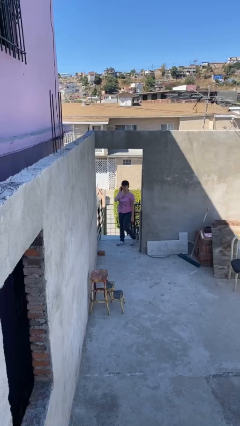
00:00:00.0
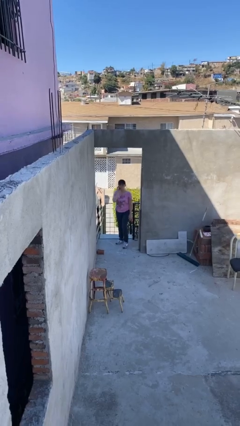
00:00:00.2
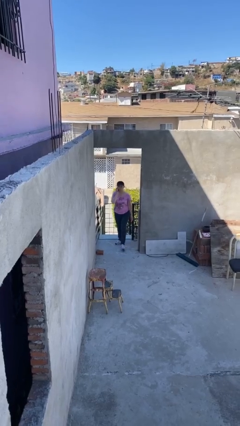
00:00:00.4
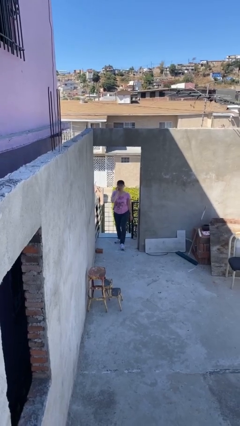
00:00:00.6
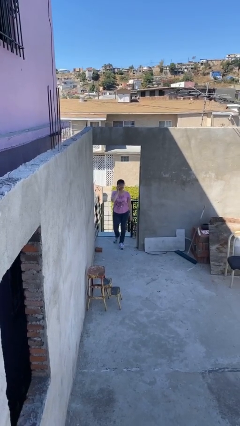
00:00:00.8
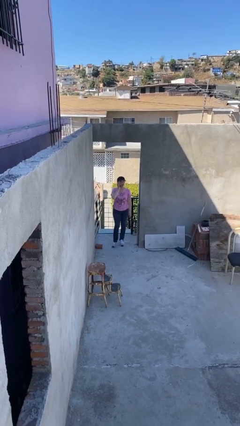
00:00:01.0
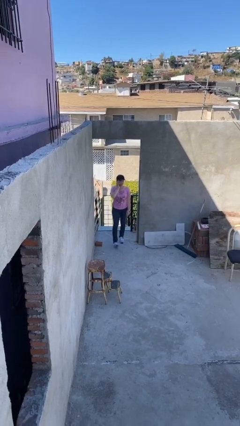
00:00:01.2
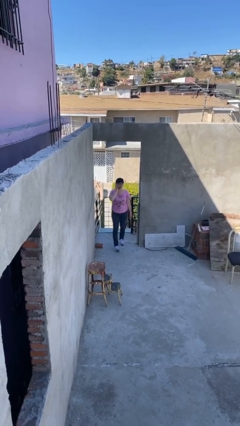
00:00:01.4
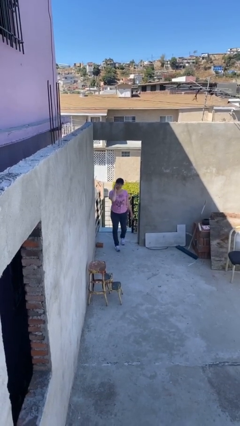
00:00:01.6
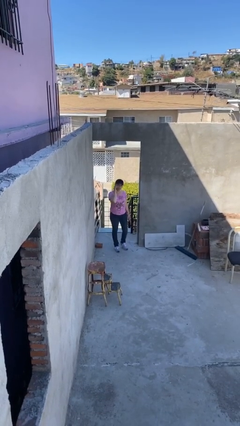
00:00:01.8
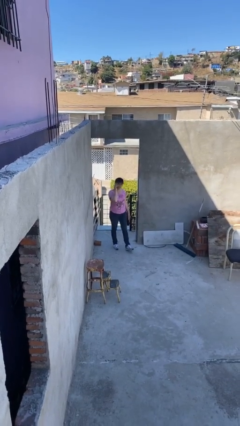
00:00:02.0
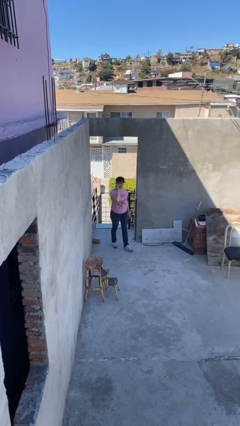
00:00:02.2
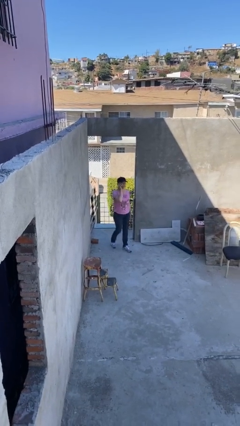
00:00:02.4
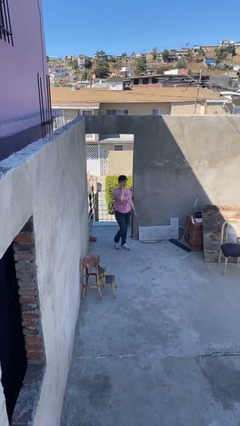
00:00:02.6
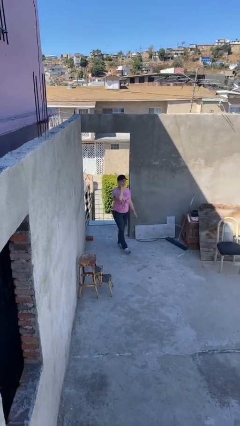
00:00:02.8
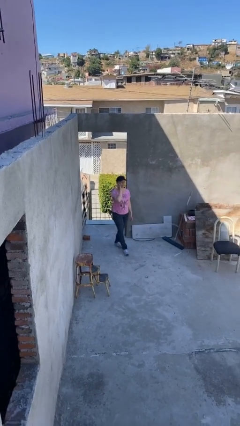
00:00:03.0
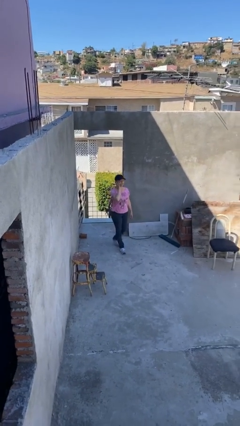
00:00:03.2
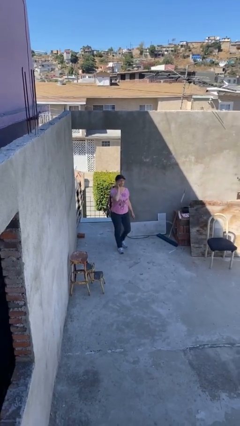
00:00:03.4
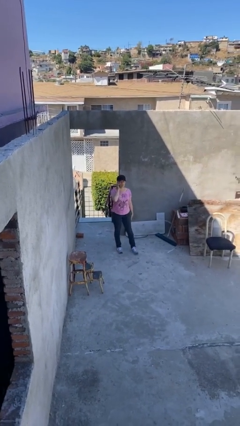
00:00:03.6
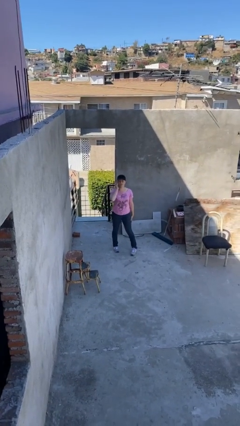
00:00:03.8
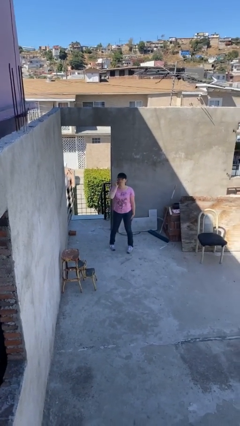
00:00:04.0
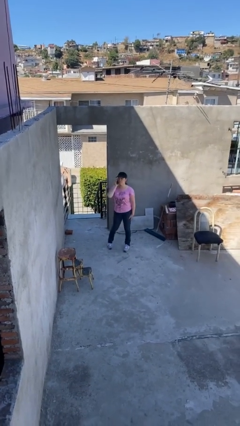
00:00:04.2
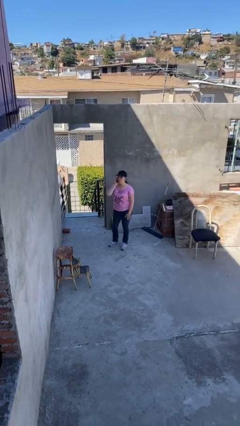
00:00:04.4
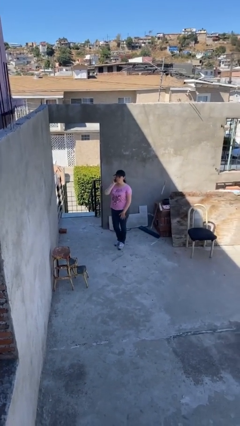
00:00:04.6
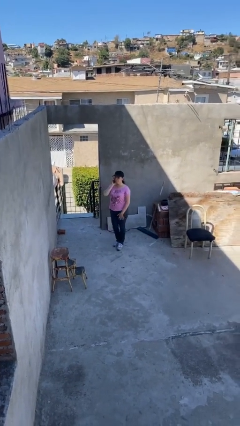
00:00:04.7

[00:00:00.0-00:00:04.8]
person enters scene through structure

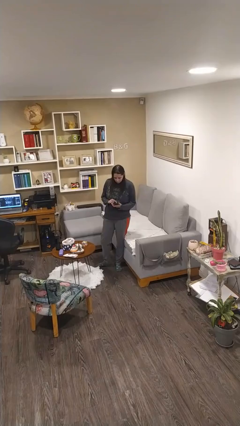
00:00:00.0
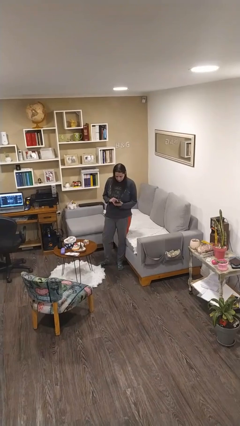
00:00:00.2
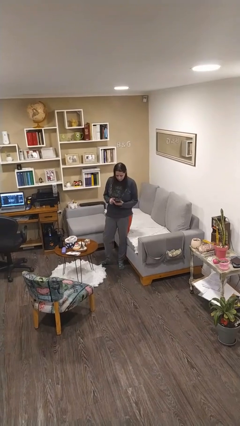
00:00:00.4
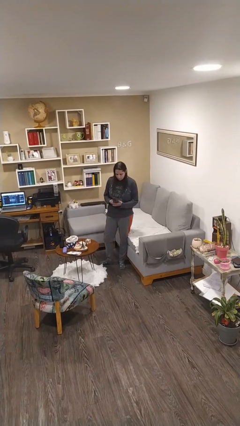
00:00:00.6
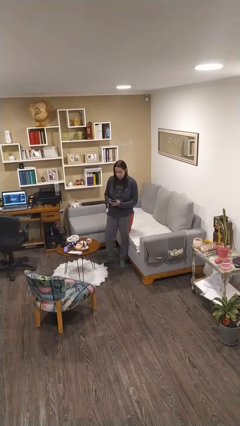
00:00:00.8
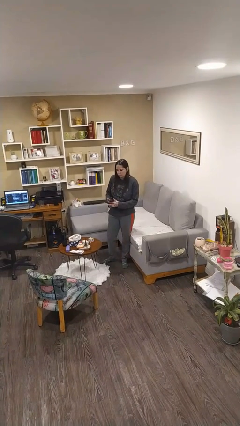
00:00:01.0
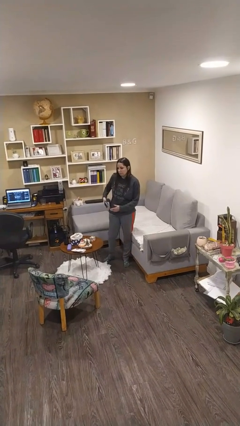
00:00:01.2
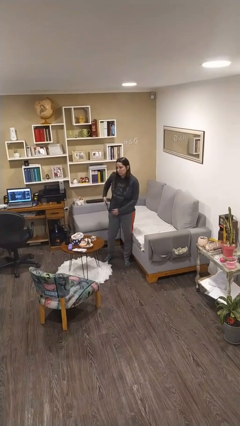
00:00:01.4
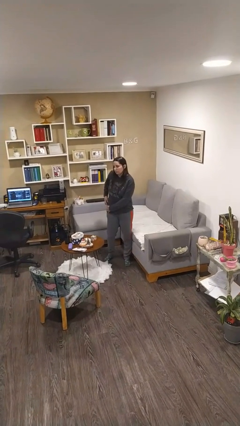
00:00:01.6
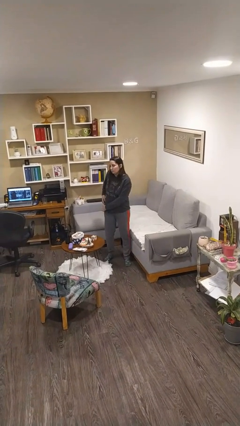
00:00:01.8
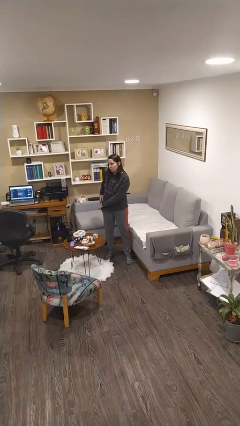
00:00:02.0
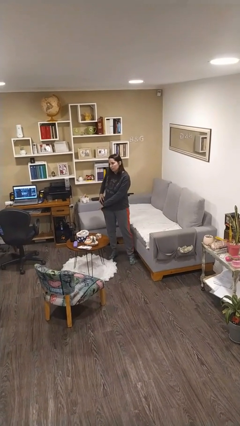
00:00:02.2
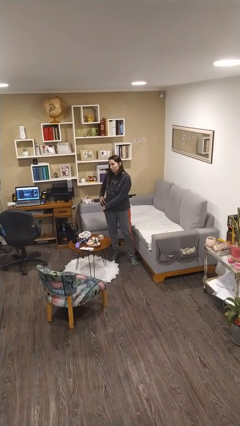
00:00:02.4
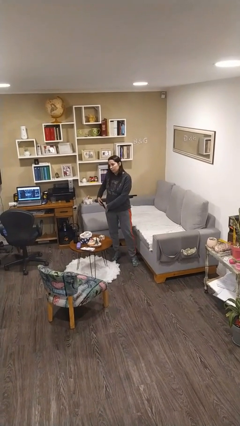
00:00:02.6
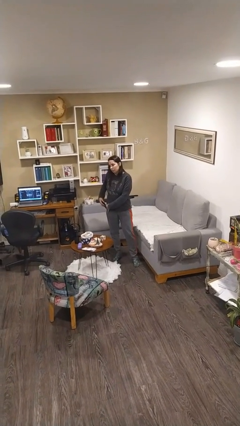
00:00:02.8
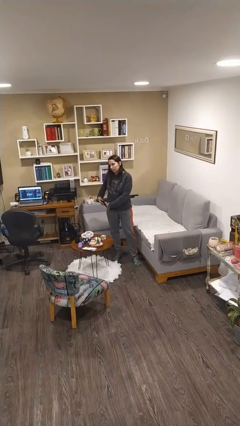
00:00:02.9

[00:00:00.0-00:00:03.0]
person puts phone into pocket

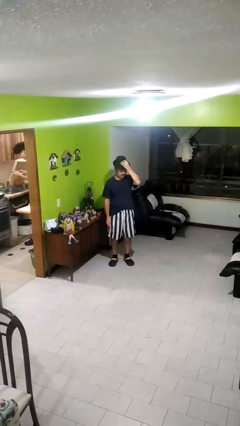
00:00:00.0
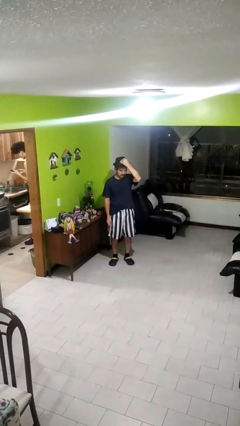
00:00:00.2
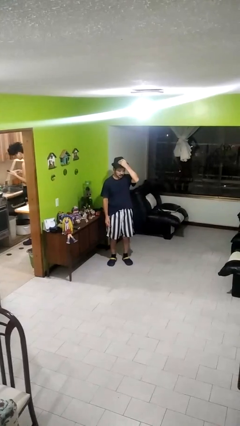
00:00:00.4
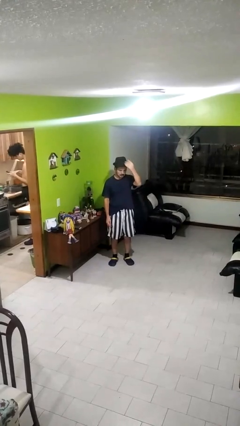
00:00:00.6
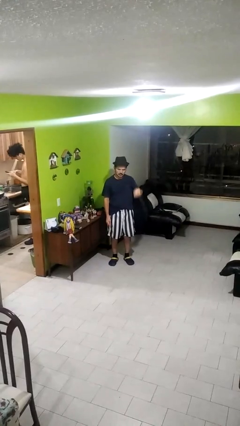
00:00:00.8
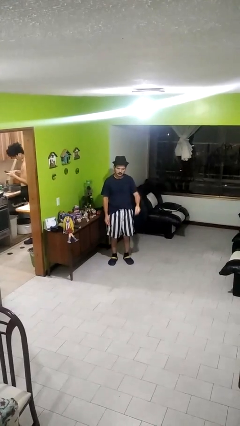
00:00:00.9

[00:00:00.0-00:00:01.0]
person puts on hat

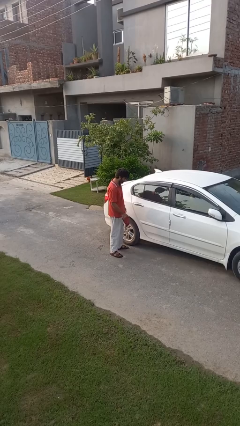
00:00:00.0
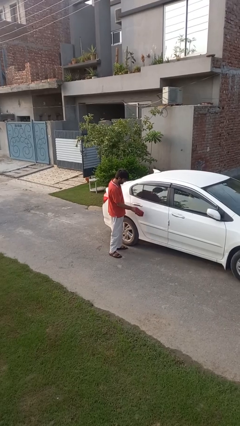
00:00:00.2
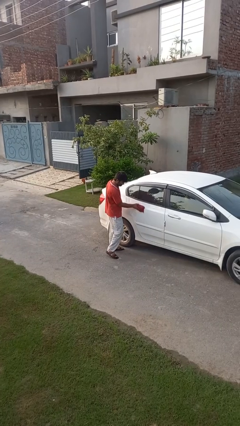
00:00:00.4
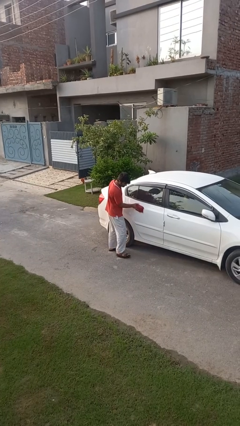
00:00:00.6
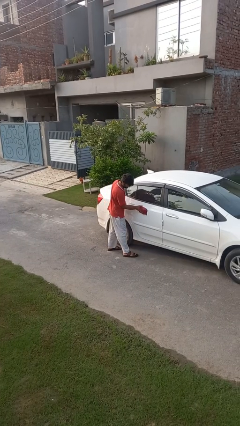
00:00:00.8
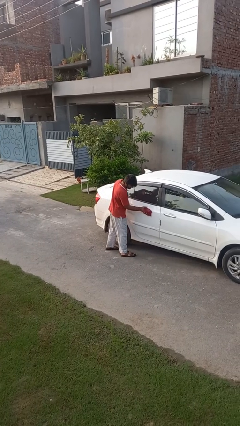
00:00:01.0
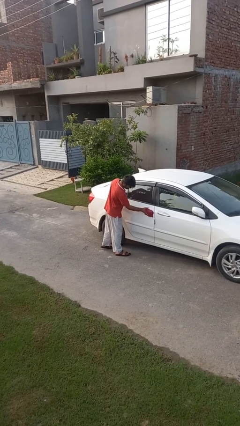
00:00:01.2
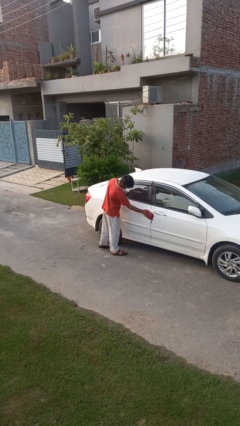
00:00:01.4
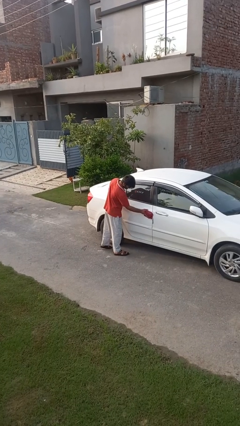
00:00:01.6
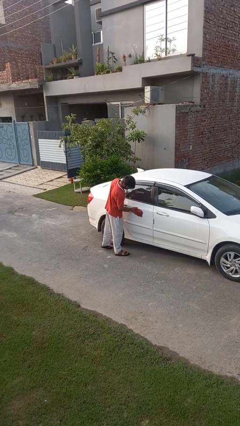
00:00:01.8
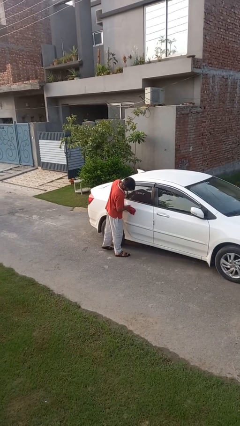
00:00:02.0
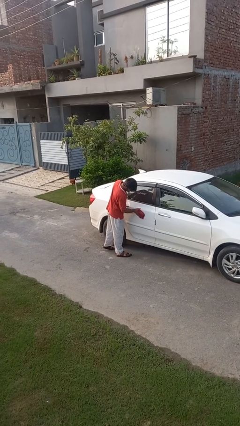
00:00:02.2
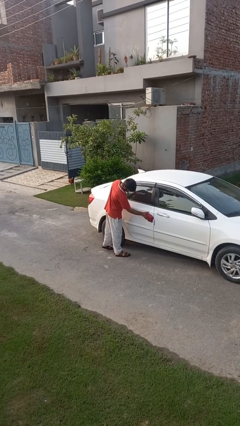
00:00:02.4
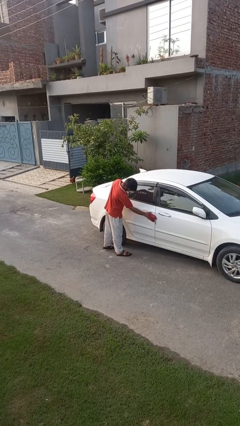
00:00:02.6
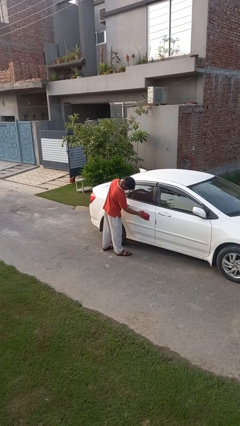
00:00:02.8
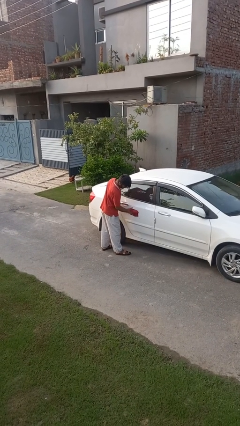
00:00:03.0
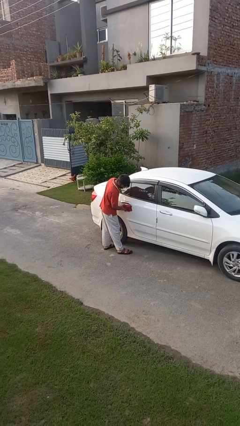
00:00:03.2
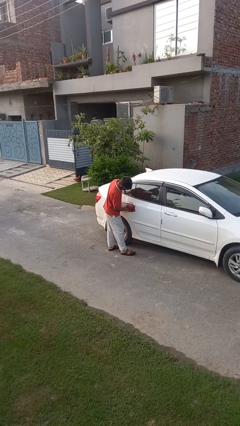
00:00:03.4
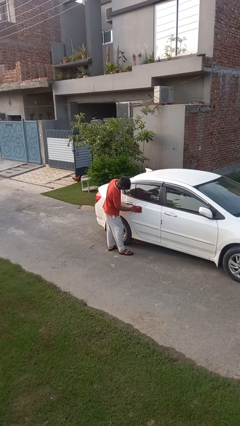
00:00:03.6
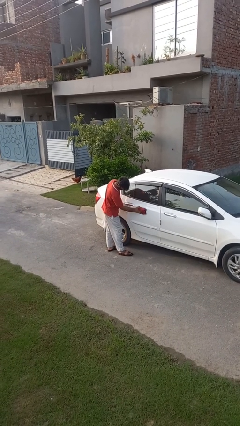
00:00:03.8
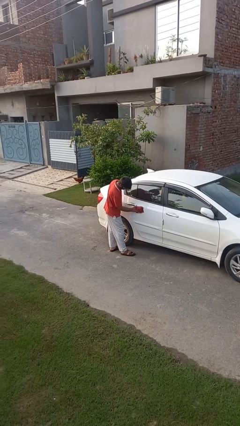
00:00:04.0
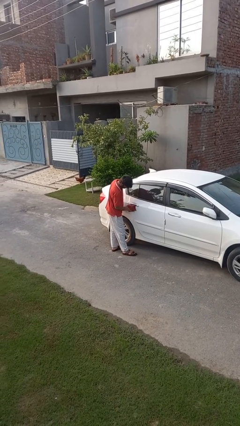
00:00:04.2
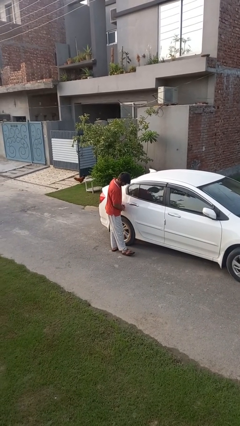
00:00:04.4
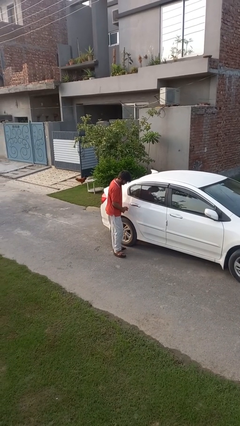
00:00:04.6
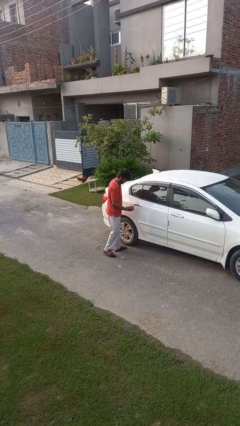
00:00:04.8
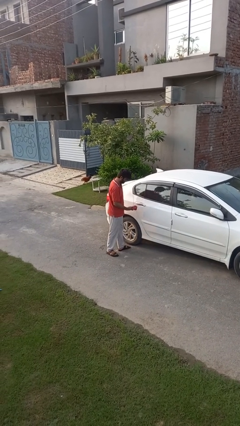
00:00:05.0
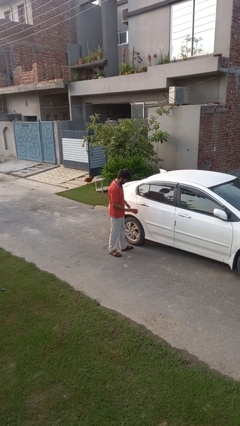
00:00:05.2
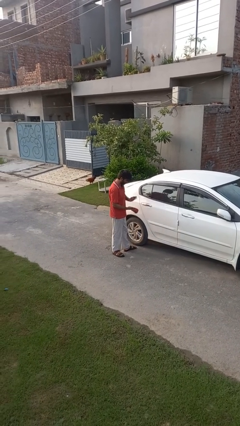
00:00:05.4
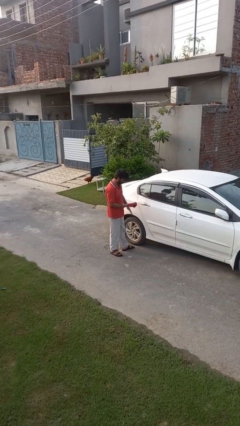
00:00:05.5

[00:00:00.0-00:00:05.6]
person polishes car with rag

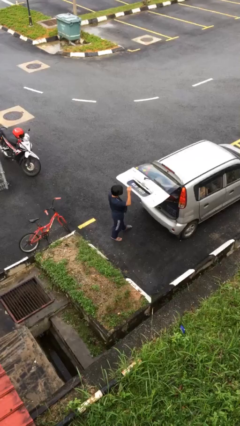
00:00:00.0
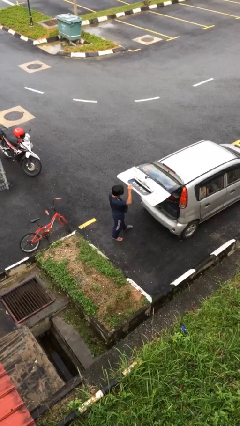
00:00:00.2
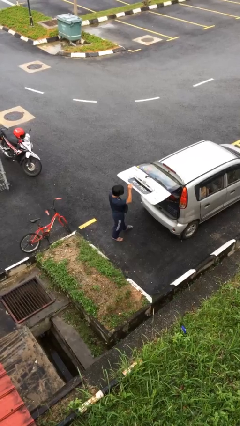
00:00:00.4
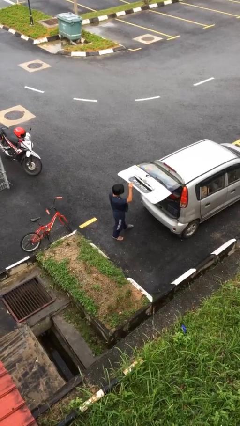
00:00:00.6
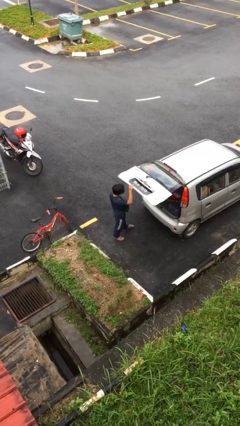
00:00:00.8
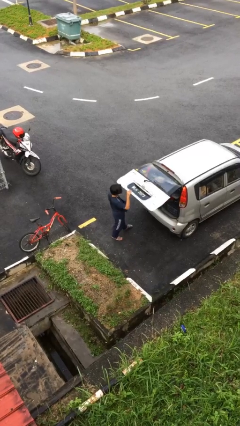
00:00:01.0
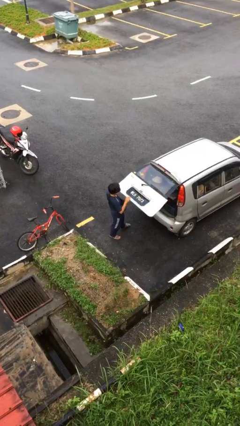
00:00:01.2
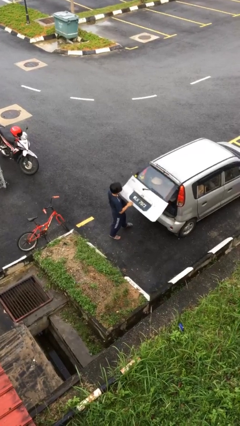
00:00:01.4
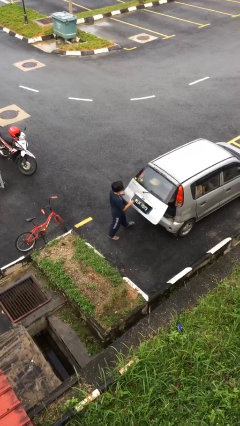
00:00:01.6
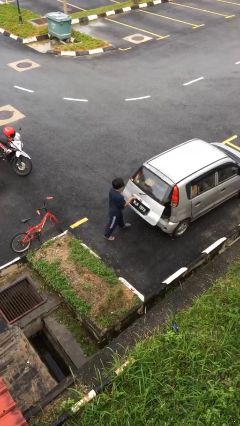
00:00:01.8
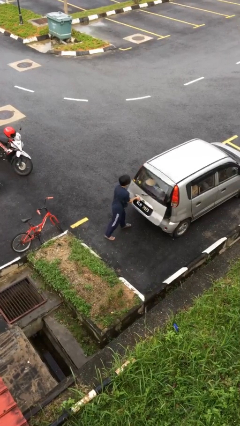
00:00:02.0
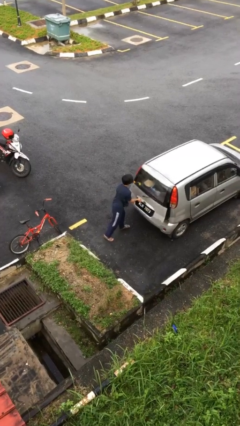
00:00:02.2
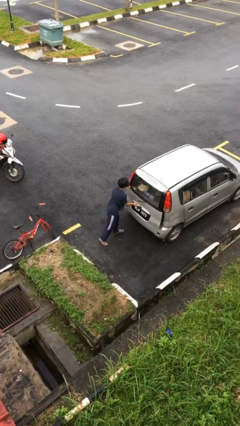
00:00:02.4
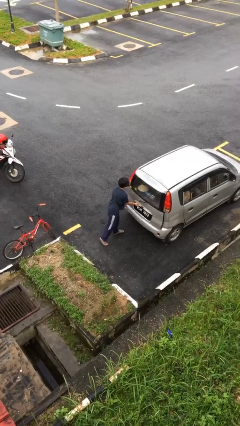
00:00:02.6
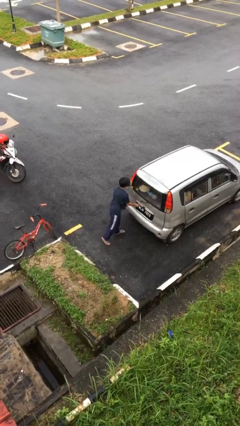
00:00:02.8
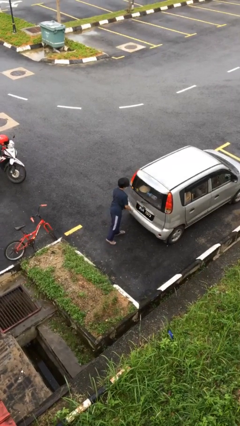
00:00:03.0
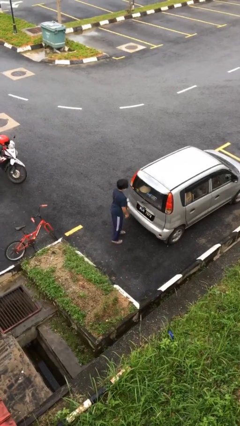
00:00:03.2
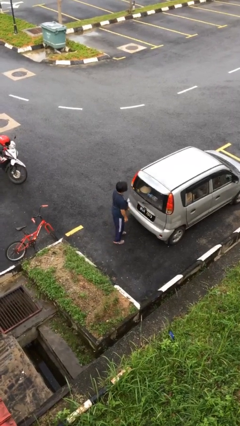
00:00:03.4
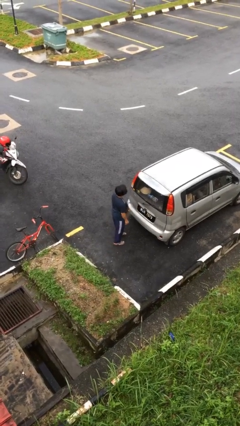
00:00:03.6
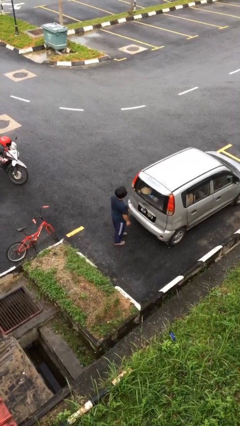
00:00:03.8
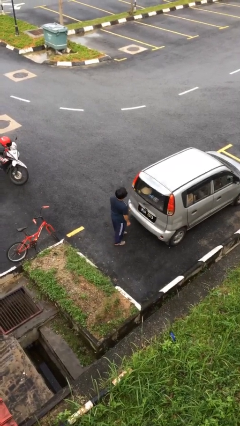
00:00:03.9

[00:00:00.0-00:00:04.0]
person closes car trunk
